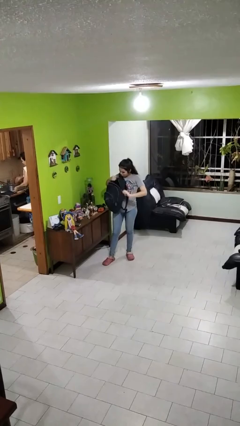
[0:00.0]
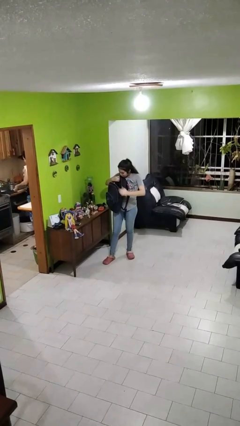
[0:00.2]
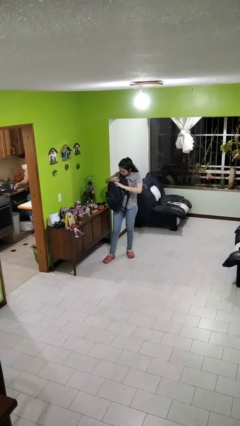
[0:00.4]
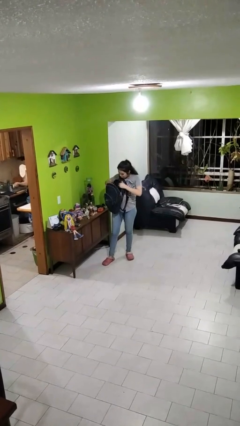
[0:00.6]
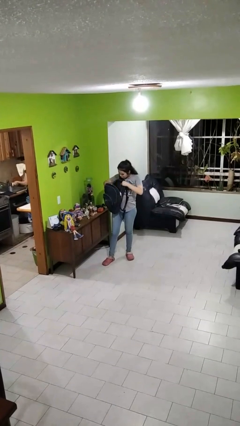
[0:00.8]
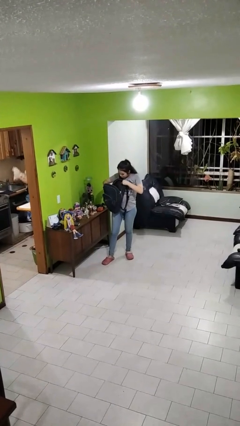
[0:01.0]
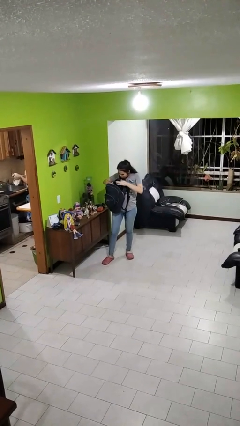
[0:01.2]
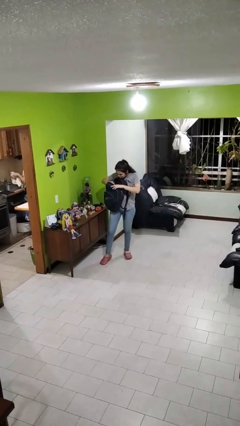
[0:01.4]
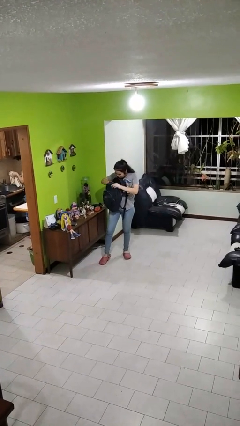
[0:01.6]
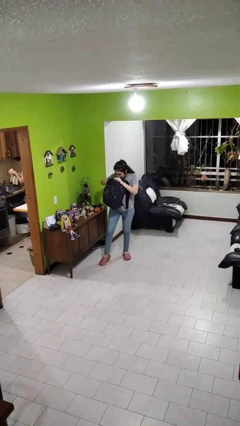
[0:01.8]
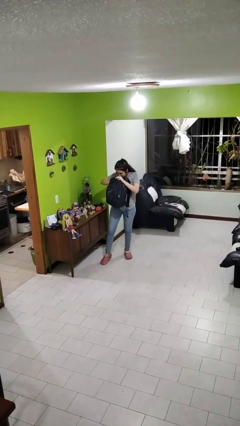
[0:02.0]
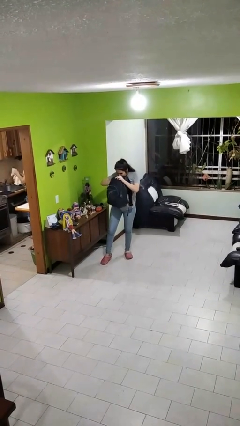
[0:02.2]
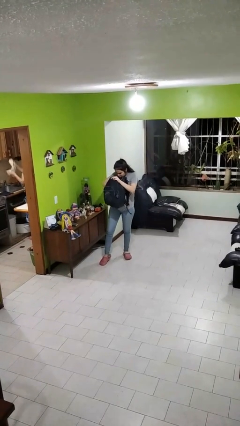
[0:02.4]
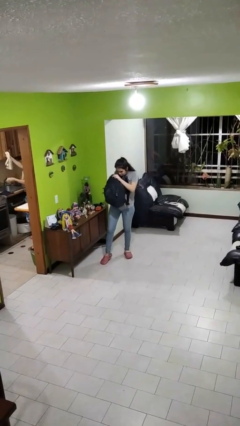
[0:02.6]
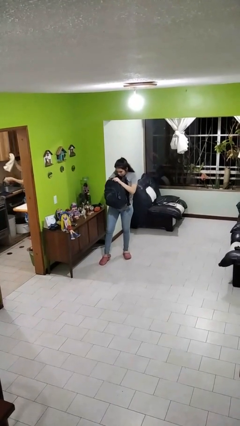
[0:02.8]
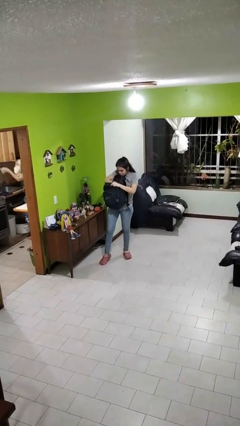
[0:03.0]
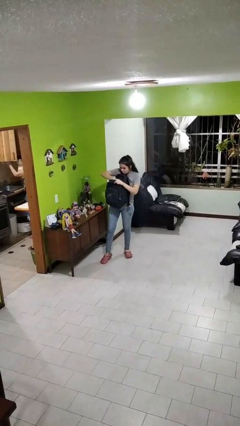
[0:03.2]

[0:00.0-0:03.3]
person searches in backpack

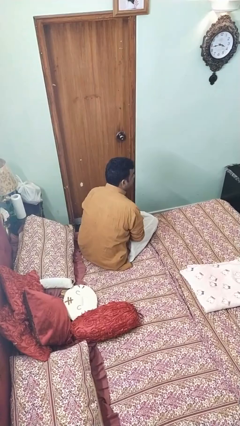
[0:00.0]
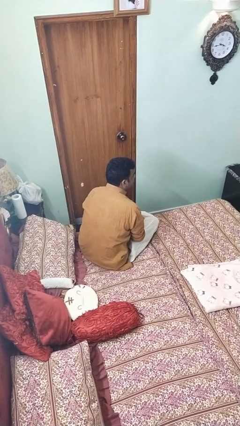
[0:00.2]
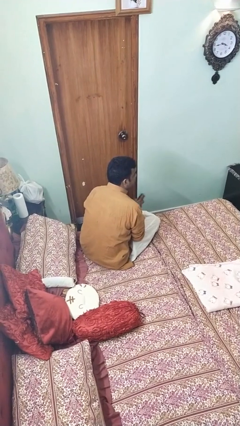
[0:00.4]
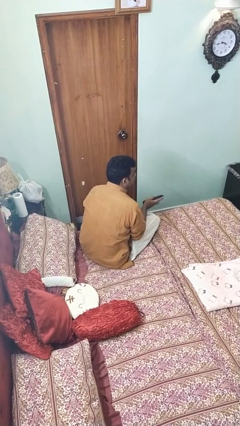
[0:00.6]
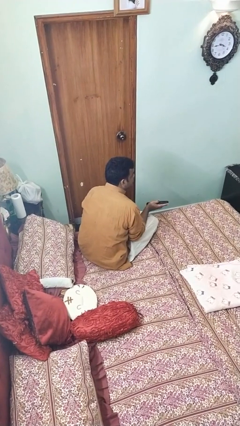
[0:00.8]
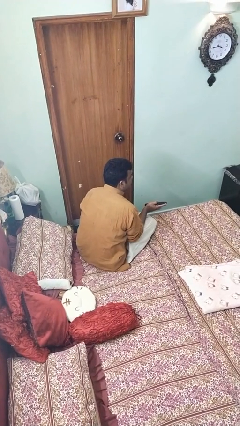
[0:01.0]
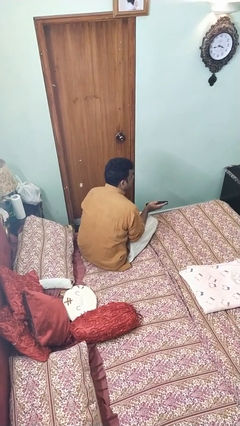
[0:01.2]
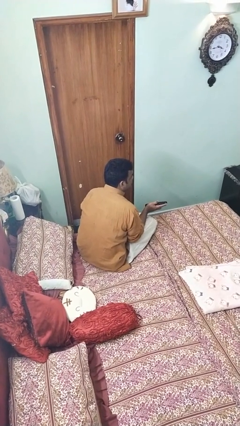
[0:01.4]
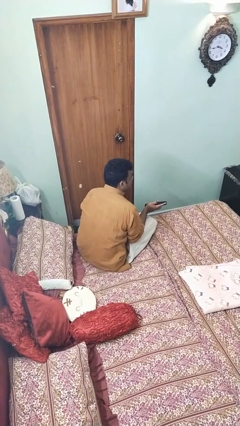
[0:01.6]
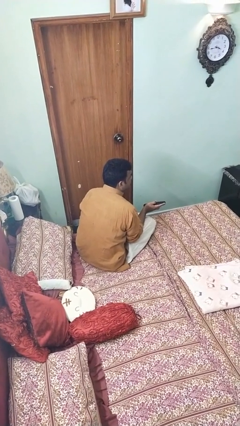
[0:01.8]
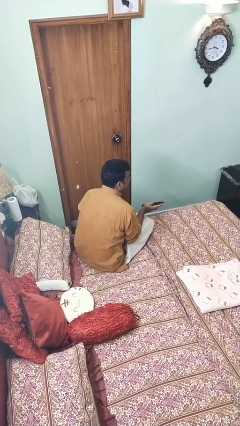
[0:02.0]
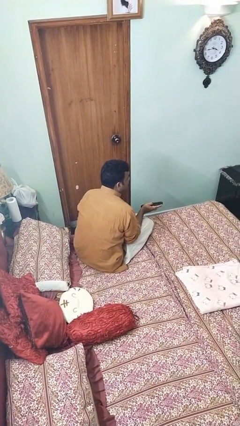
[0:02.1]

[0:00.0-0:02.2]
person uses television remote

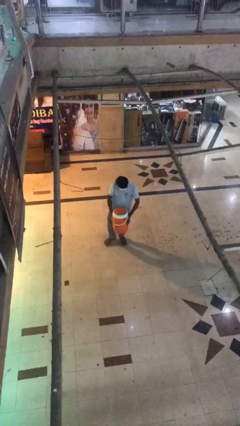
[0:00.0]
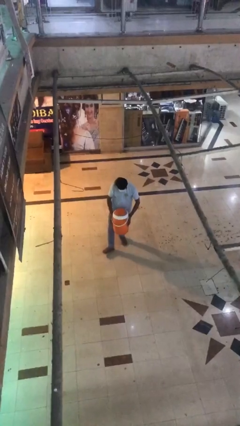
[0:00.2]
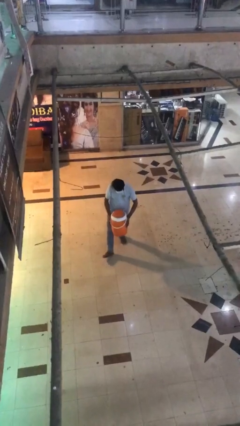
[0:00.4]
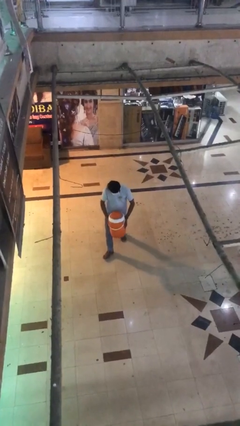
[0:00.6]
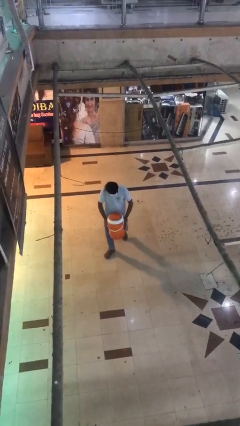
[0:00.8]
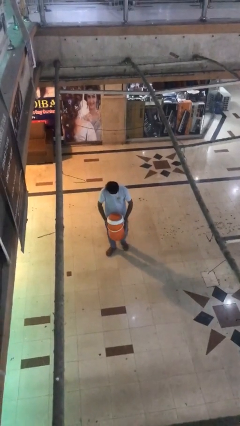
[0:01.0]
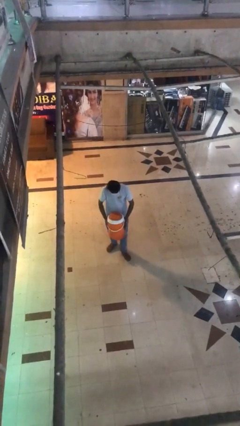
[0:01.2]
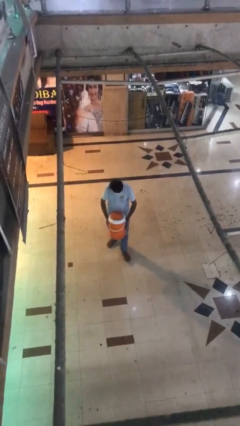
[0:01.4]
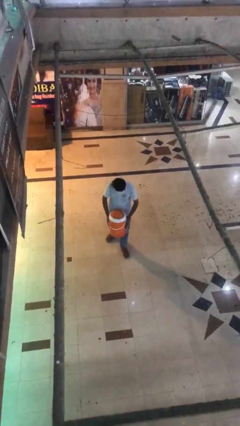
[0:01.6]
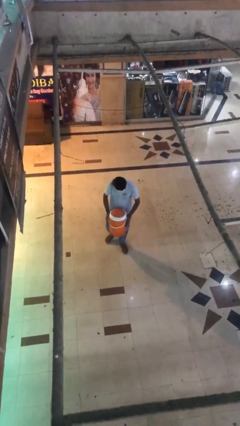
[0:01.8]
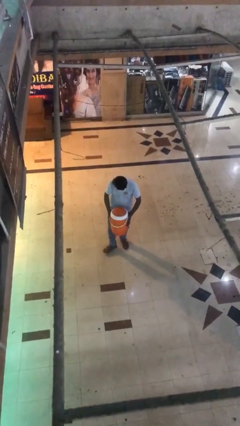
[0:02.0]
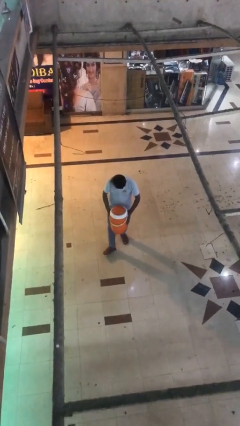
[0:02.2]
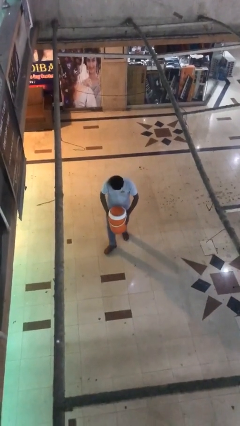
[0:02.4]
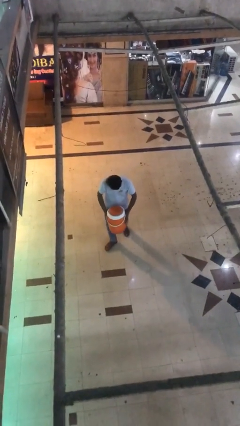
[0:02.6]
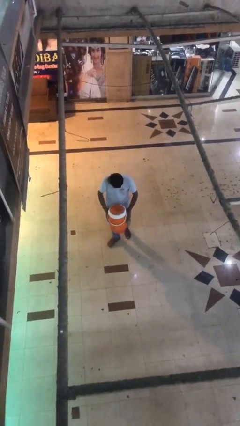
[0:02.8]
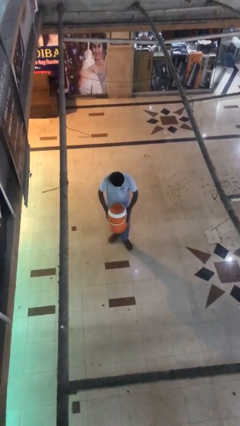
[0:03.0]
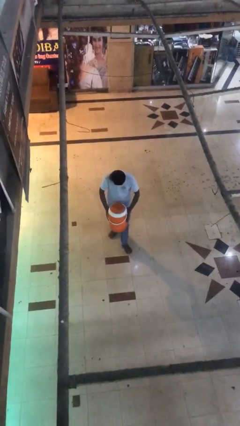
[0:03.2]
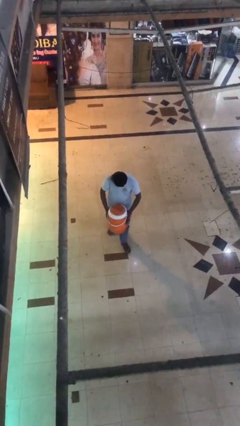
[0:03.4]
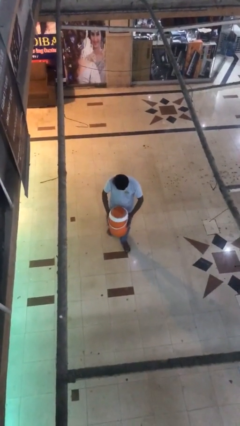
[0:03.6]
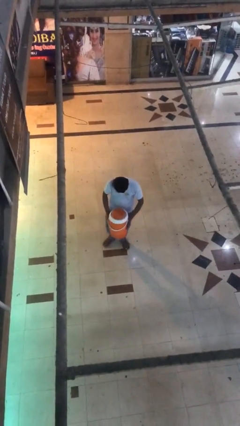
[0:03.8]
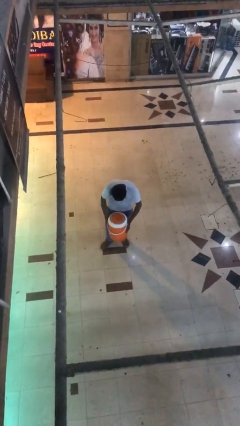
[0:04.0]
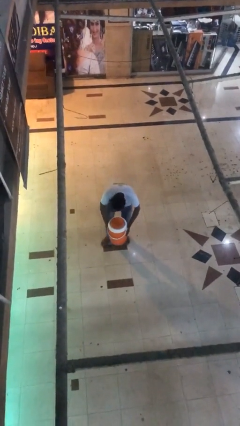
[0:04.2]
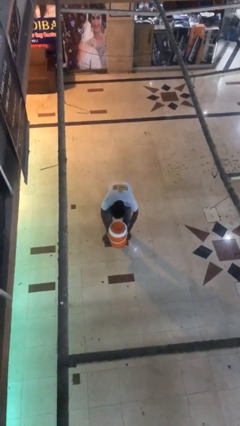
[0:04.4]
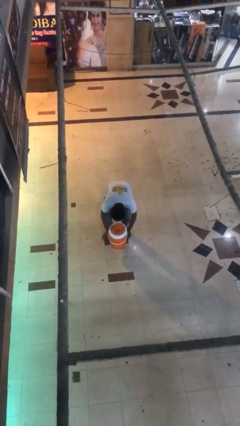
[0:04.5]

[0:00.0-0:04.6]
person carries heavy object

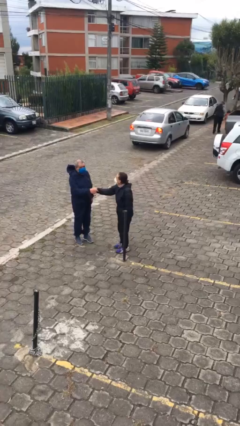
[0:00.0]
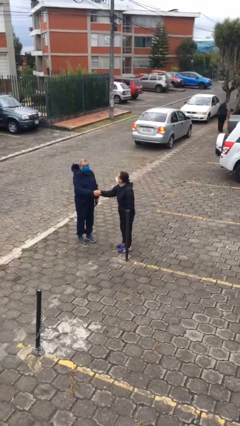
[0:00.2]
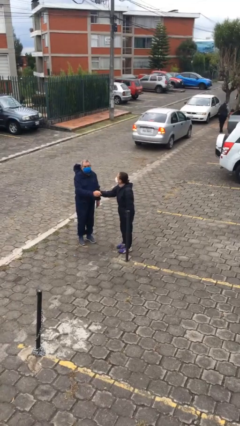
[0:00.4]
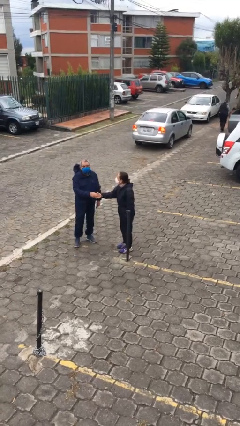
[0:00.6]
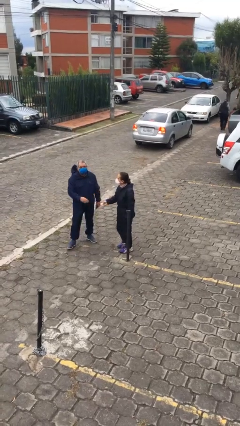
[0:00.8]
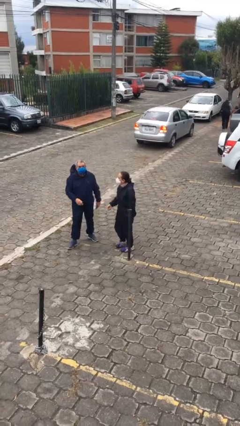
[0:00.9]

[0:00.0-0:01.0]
person shakes hand

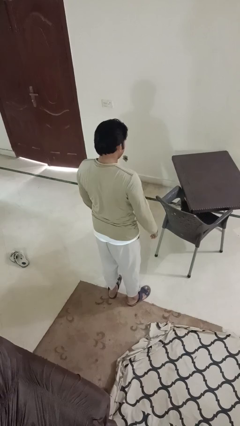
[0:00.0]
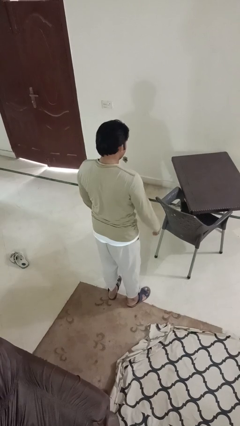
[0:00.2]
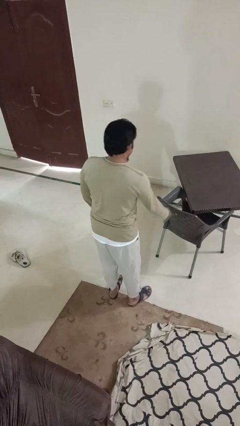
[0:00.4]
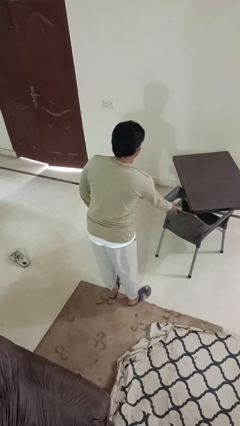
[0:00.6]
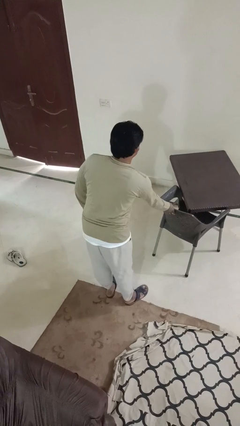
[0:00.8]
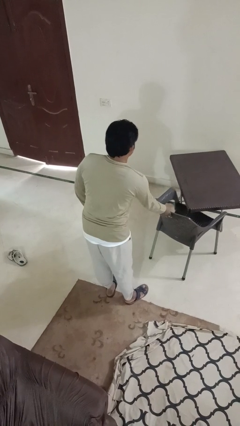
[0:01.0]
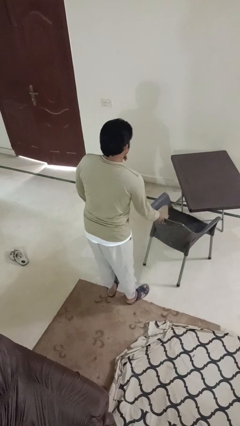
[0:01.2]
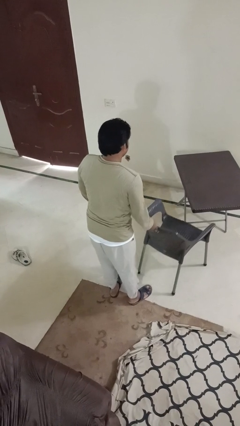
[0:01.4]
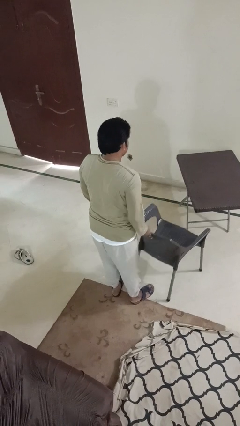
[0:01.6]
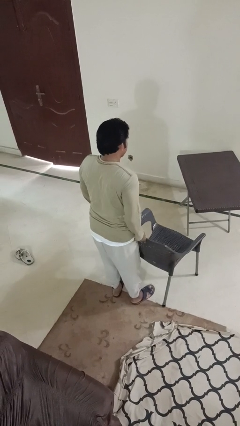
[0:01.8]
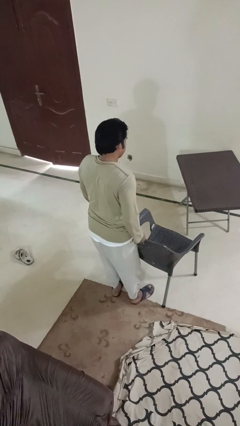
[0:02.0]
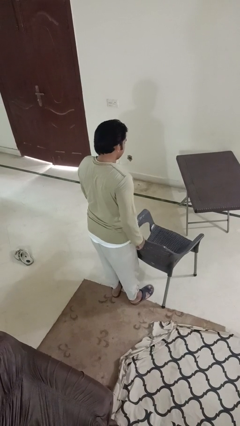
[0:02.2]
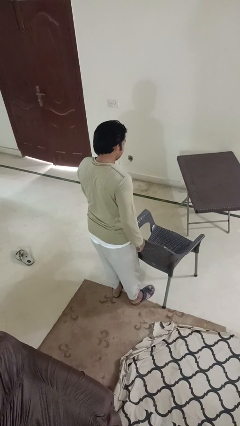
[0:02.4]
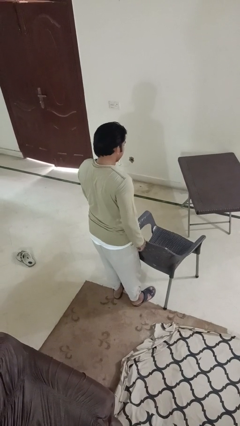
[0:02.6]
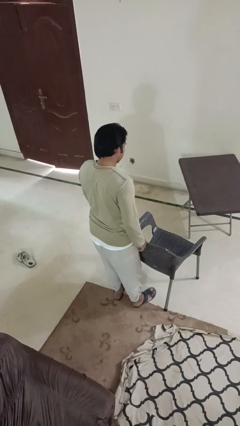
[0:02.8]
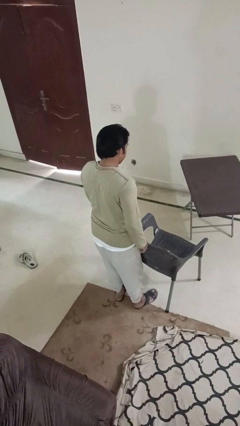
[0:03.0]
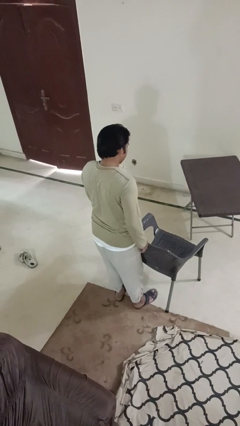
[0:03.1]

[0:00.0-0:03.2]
person pulls out chair

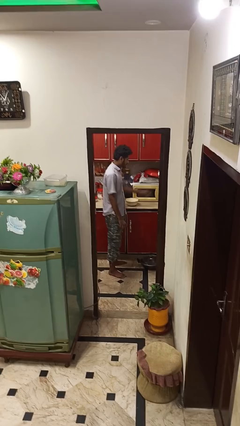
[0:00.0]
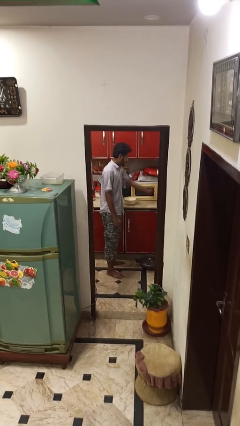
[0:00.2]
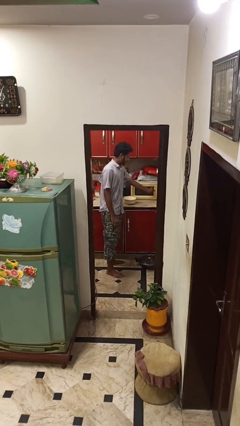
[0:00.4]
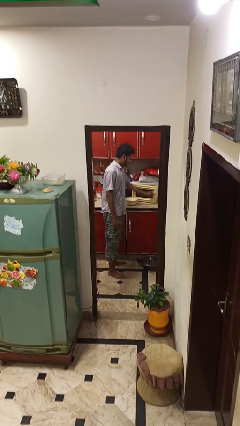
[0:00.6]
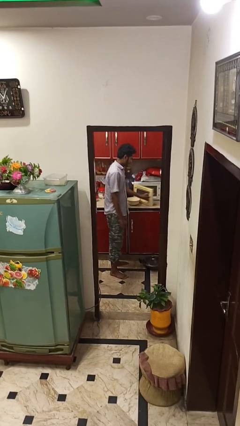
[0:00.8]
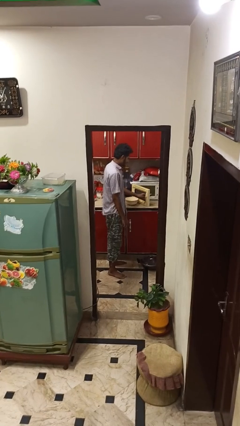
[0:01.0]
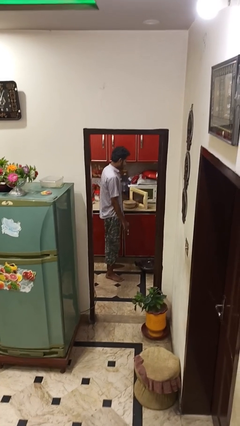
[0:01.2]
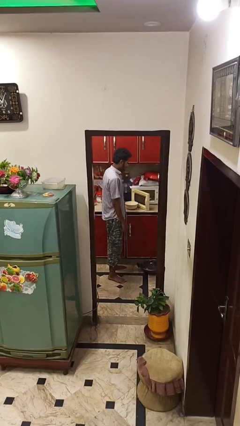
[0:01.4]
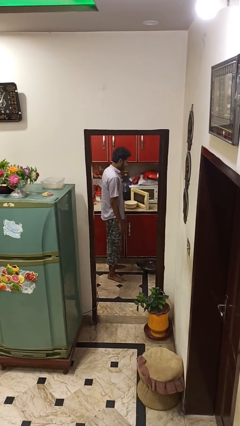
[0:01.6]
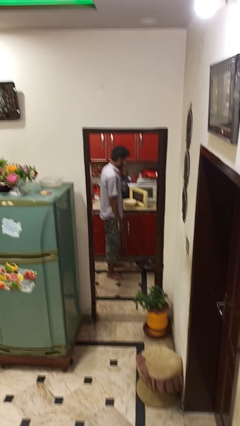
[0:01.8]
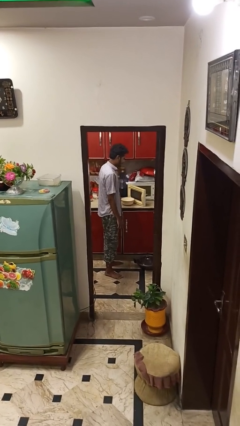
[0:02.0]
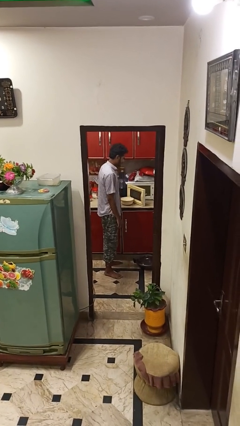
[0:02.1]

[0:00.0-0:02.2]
person opens microwave

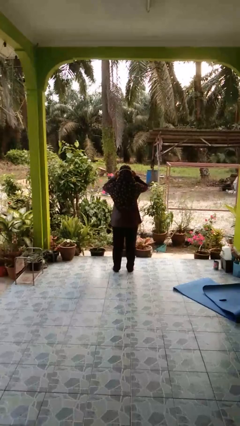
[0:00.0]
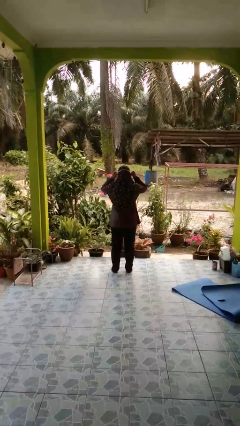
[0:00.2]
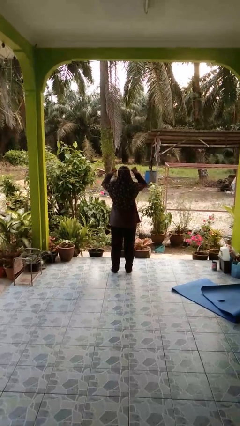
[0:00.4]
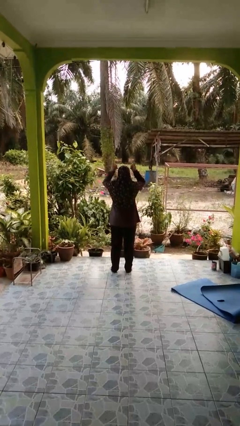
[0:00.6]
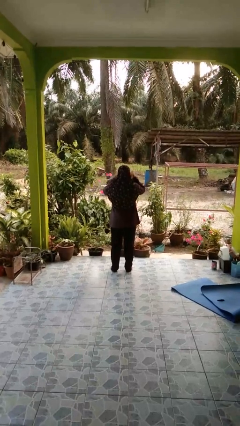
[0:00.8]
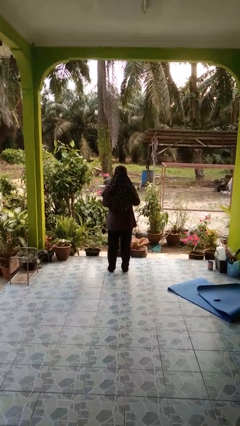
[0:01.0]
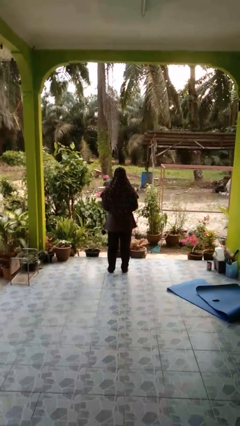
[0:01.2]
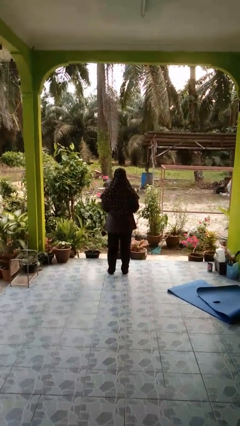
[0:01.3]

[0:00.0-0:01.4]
person takes off facemask
